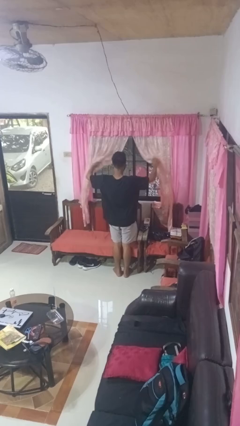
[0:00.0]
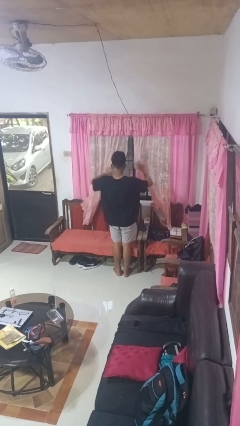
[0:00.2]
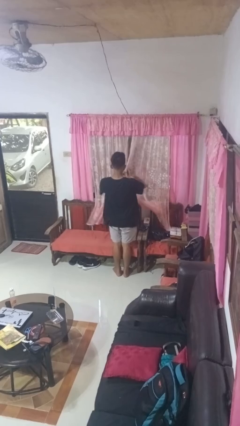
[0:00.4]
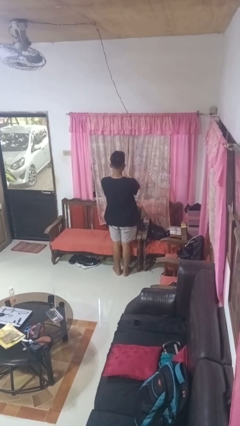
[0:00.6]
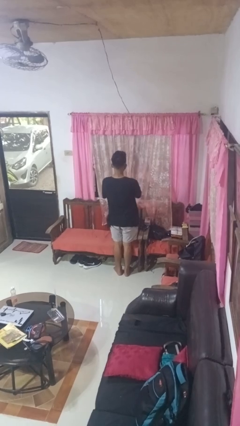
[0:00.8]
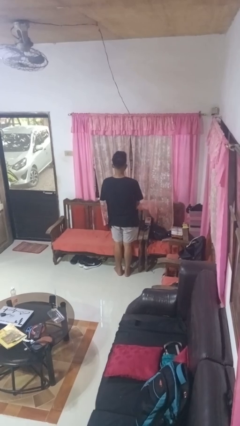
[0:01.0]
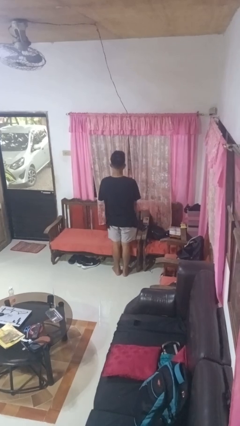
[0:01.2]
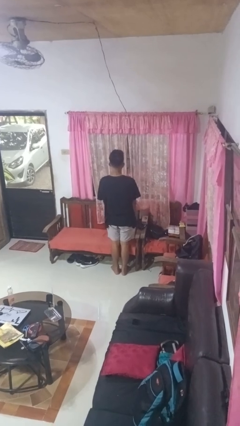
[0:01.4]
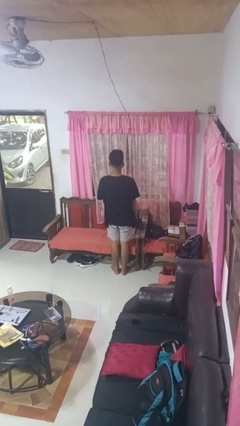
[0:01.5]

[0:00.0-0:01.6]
person closes curtains

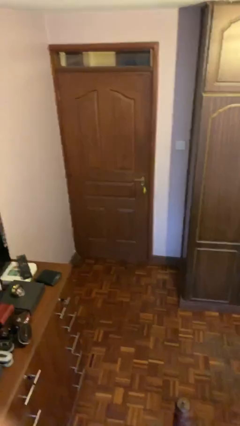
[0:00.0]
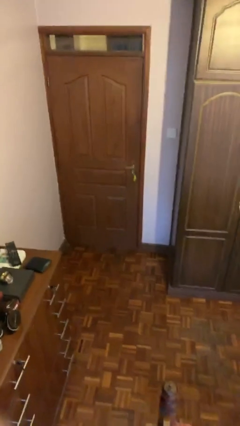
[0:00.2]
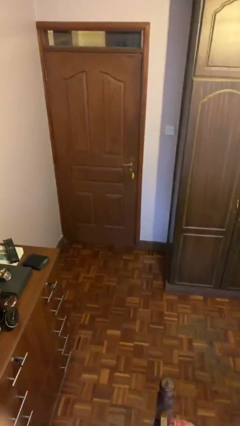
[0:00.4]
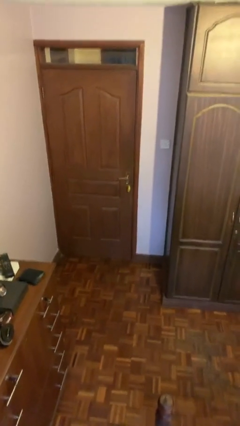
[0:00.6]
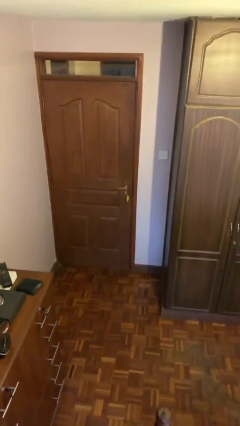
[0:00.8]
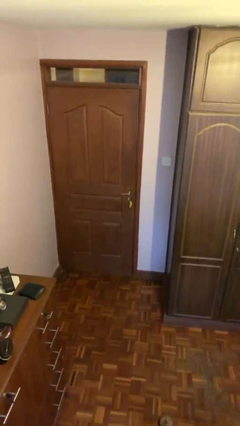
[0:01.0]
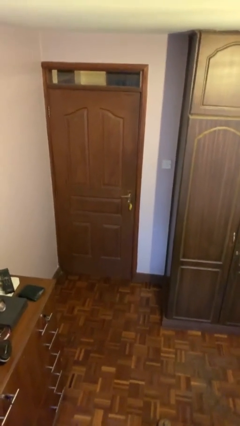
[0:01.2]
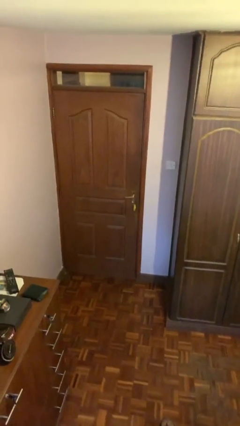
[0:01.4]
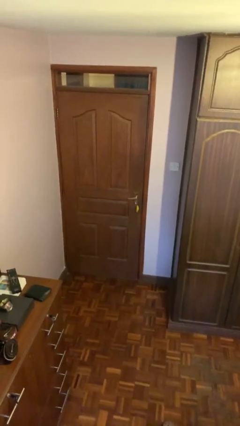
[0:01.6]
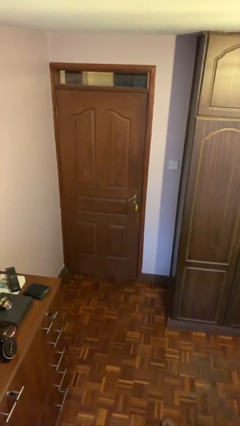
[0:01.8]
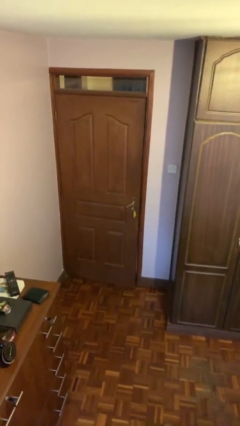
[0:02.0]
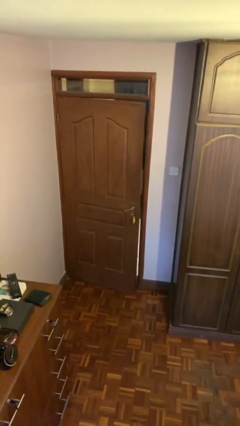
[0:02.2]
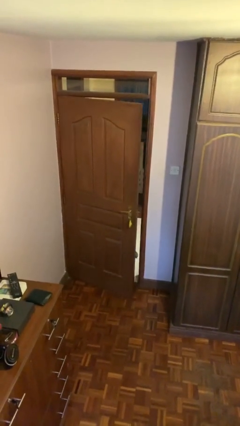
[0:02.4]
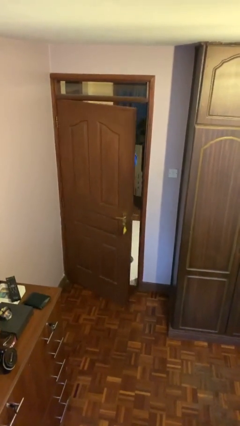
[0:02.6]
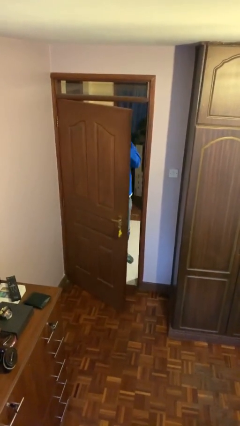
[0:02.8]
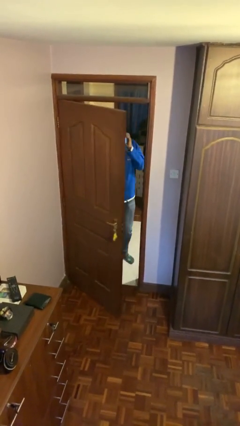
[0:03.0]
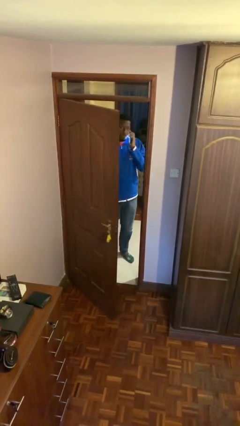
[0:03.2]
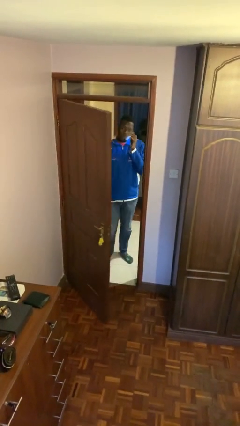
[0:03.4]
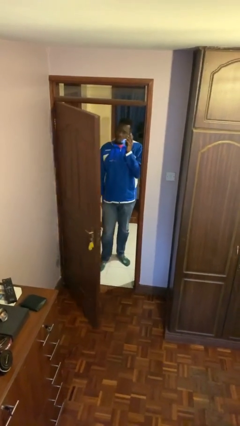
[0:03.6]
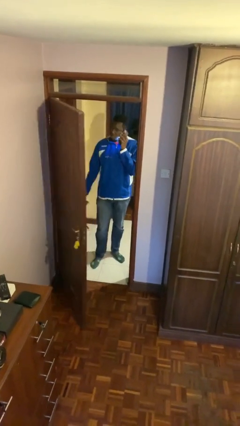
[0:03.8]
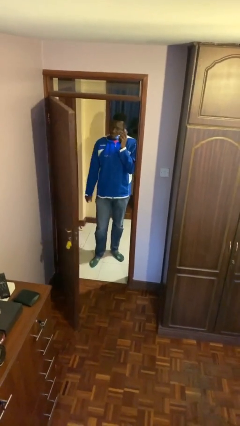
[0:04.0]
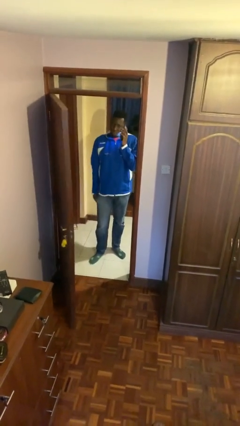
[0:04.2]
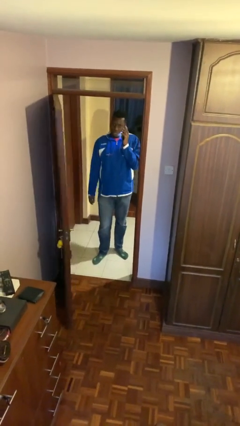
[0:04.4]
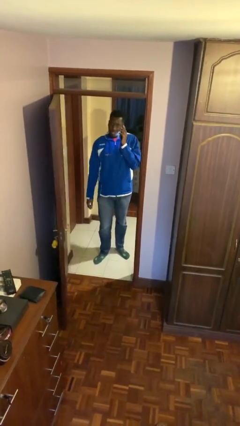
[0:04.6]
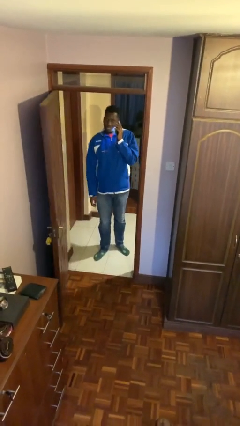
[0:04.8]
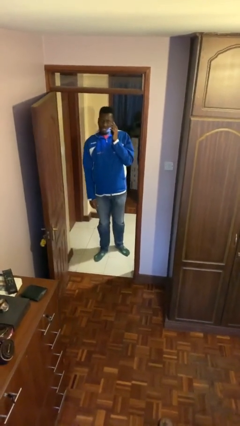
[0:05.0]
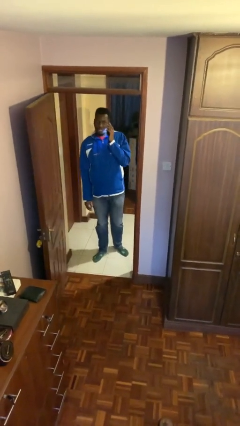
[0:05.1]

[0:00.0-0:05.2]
person opens facility door

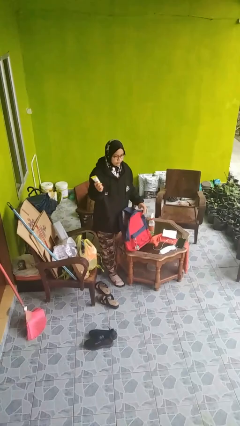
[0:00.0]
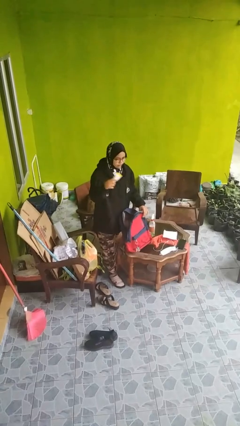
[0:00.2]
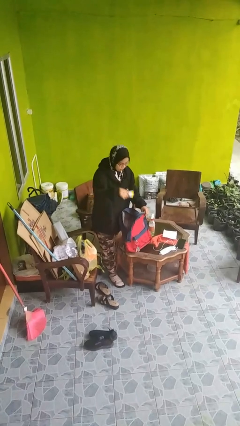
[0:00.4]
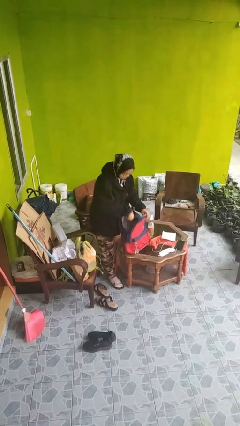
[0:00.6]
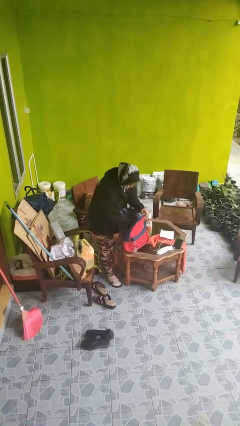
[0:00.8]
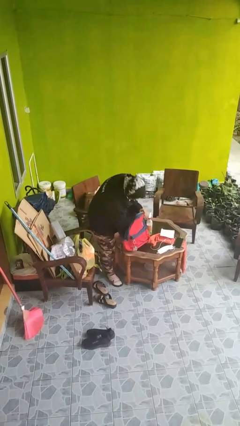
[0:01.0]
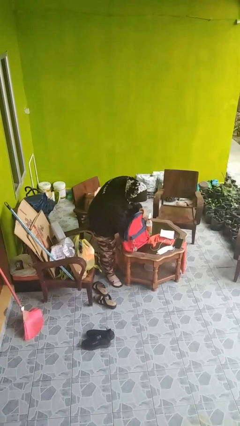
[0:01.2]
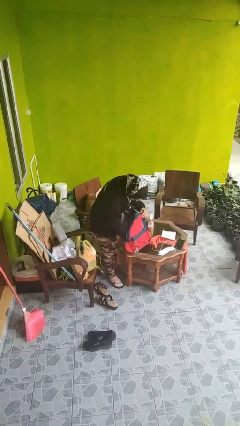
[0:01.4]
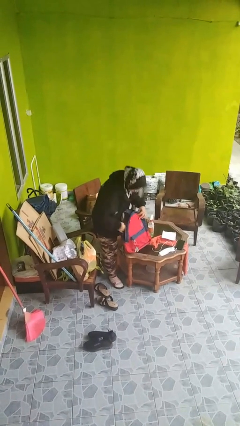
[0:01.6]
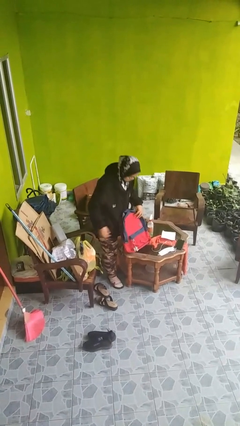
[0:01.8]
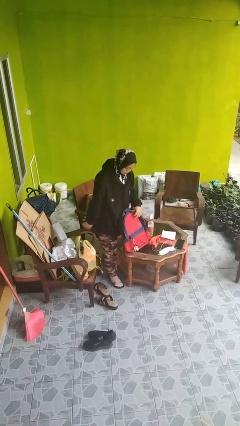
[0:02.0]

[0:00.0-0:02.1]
person puts object into backpack

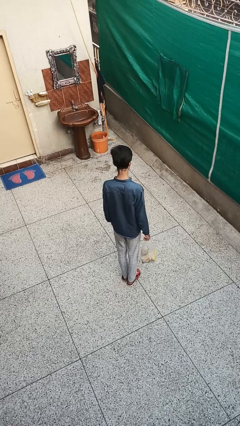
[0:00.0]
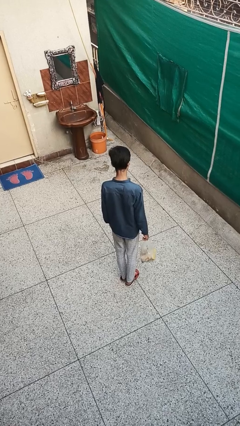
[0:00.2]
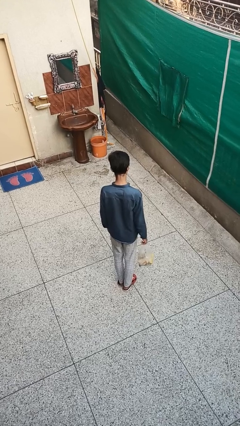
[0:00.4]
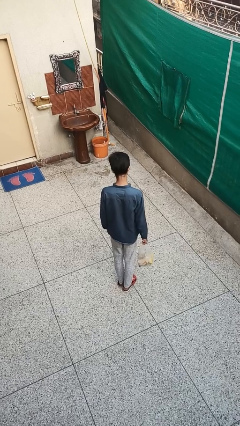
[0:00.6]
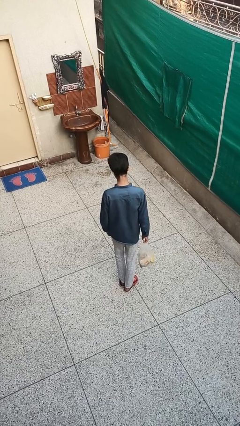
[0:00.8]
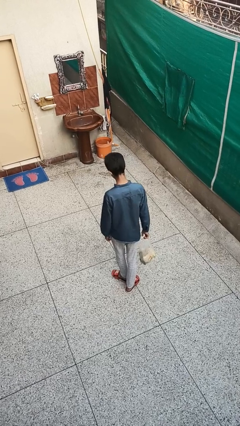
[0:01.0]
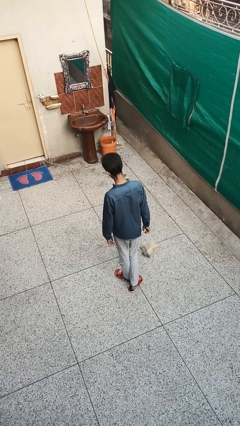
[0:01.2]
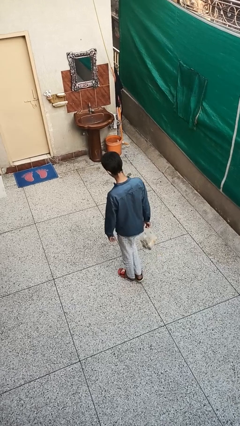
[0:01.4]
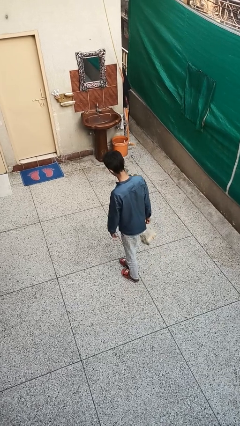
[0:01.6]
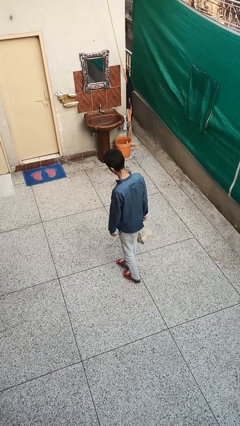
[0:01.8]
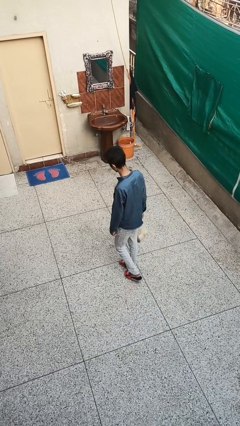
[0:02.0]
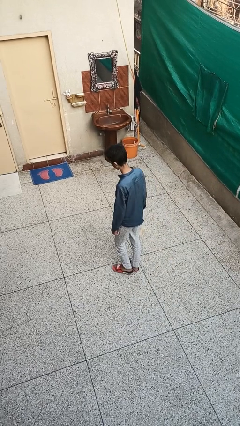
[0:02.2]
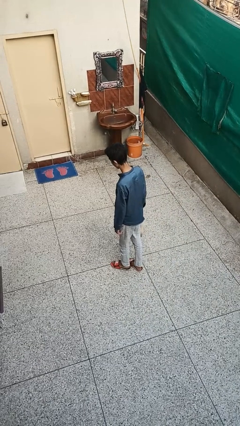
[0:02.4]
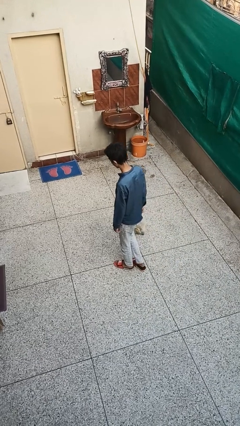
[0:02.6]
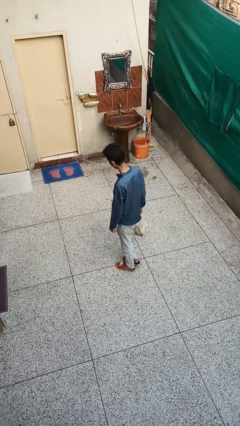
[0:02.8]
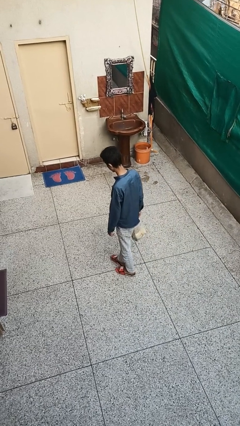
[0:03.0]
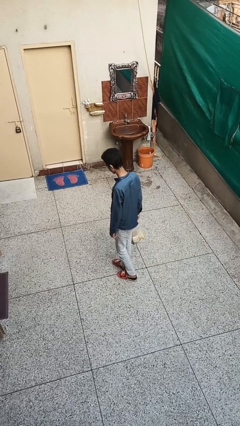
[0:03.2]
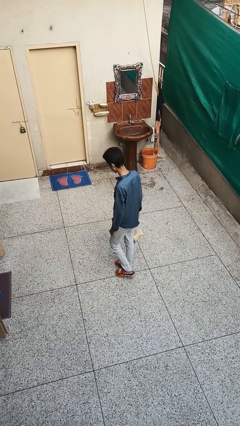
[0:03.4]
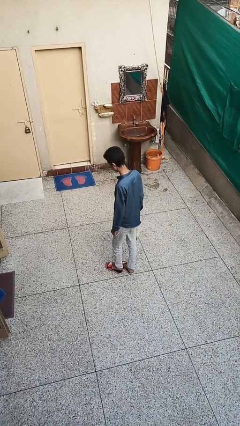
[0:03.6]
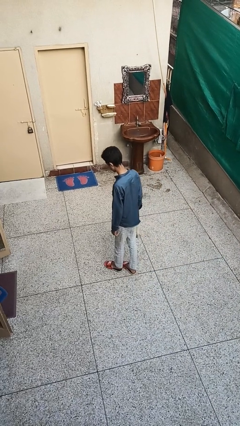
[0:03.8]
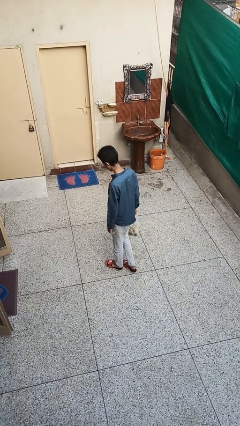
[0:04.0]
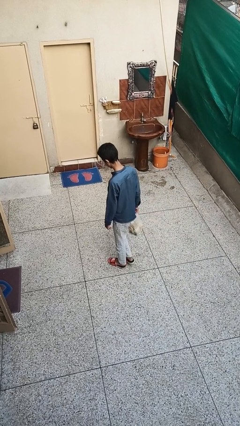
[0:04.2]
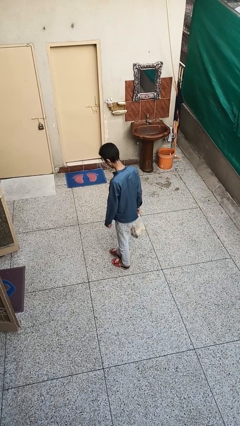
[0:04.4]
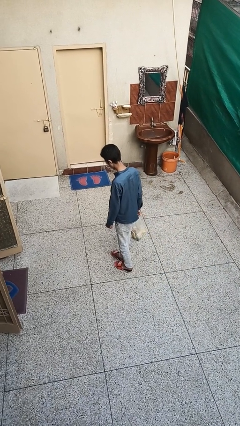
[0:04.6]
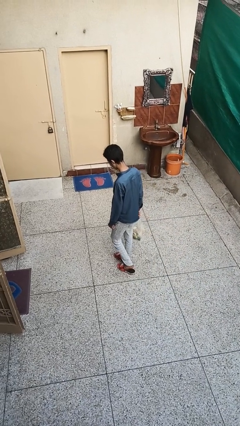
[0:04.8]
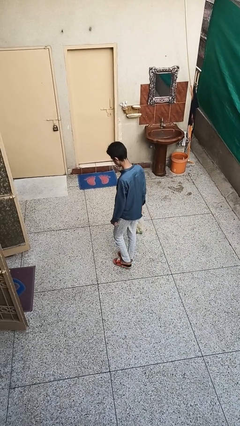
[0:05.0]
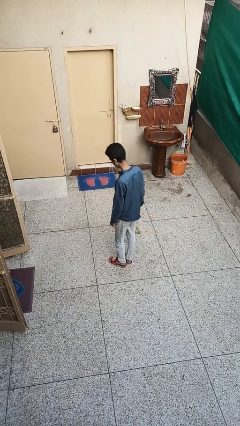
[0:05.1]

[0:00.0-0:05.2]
person carries groceries

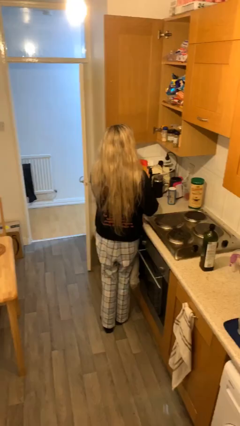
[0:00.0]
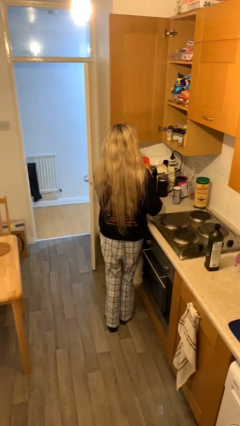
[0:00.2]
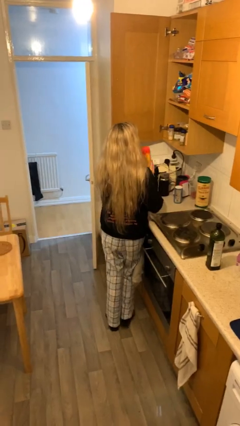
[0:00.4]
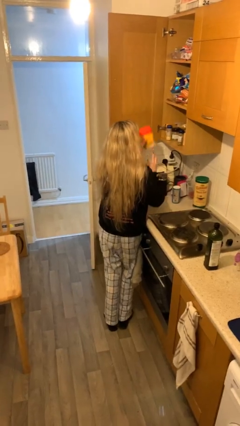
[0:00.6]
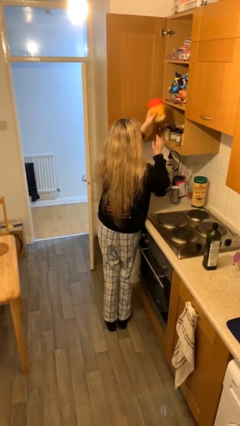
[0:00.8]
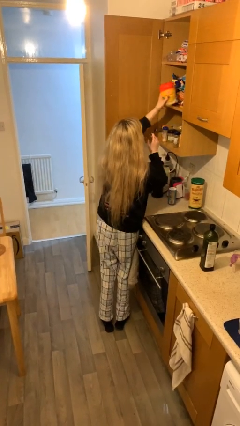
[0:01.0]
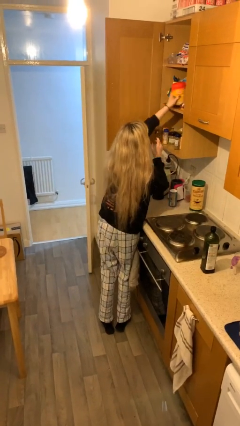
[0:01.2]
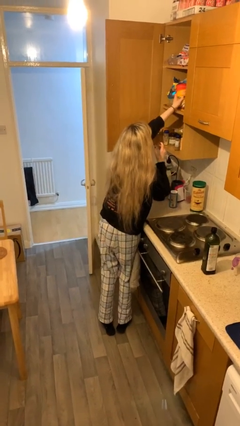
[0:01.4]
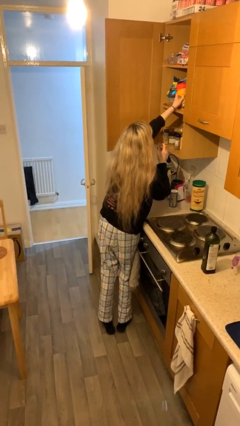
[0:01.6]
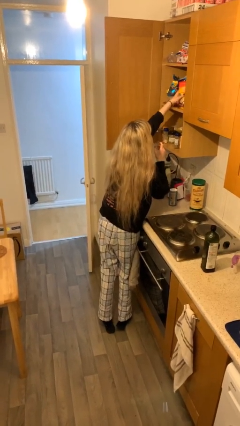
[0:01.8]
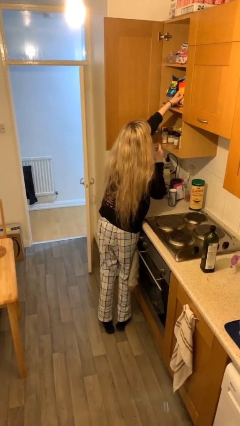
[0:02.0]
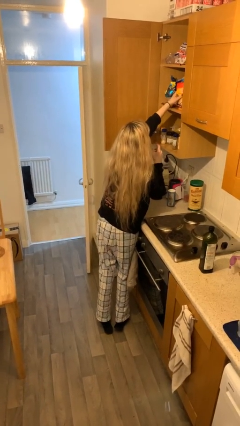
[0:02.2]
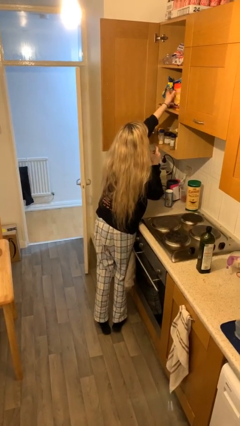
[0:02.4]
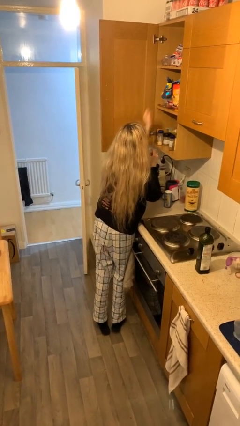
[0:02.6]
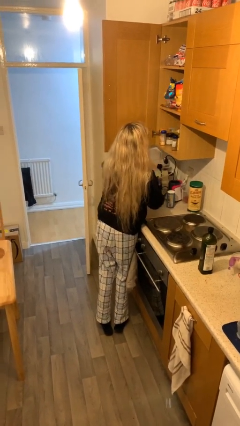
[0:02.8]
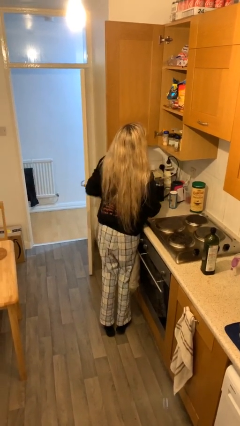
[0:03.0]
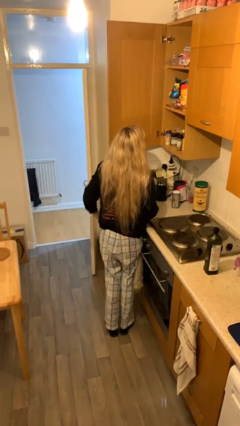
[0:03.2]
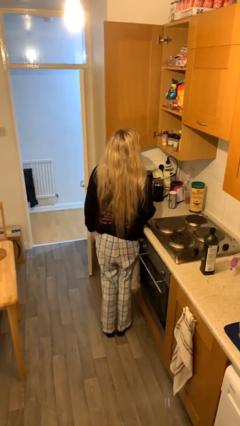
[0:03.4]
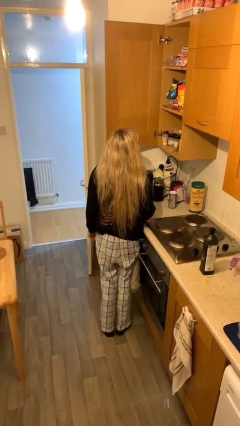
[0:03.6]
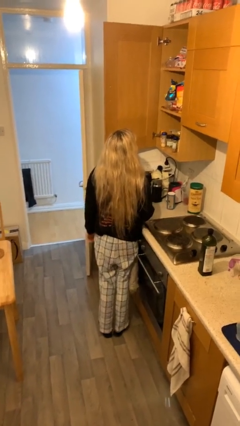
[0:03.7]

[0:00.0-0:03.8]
person puts down object on shelf
